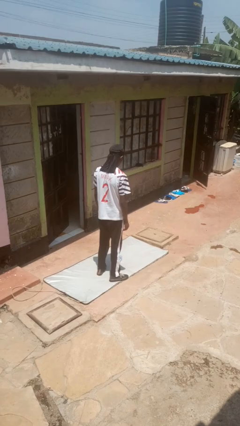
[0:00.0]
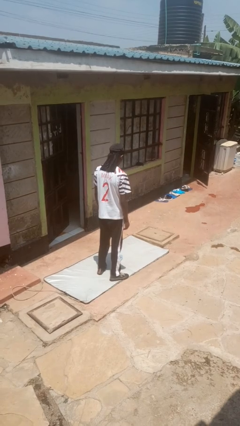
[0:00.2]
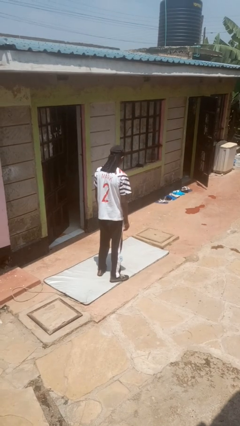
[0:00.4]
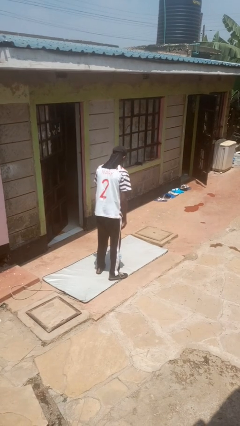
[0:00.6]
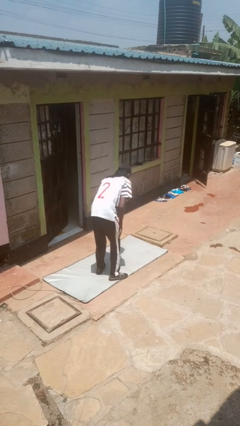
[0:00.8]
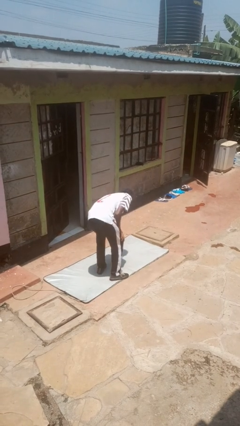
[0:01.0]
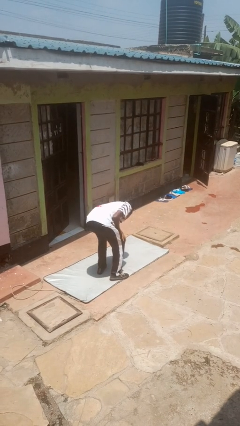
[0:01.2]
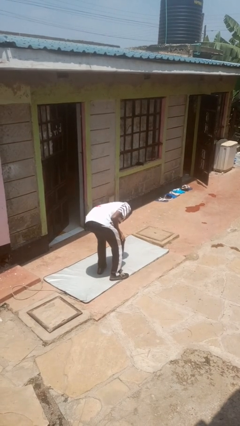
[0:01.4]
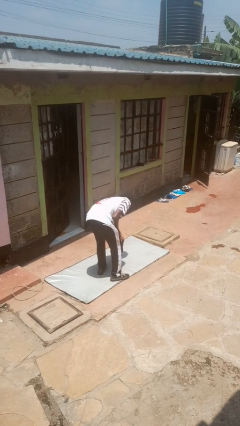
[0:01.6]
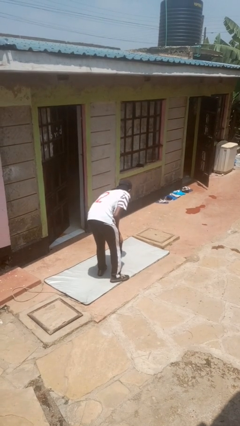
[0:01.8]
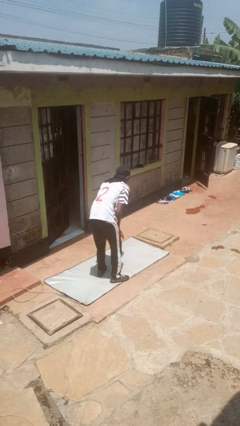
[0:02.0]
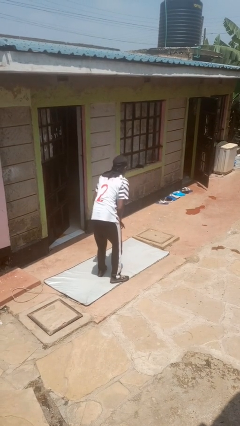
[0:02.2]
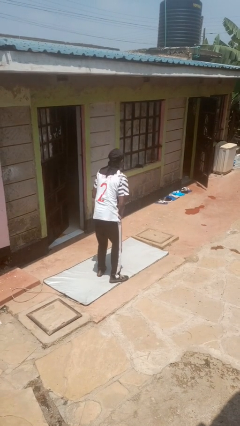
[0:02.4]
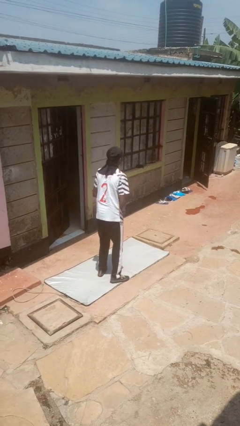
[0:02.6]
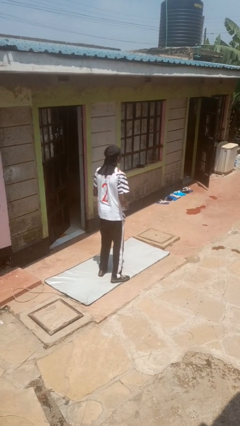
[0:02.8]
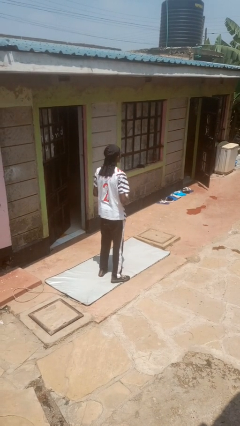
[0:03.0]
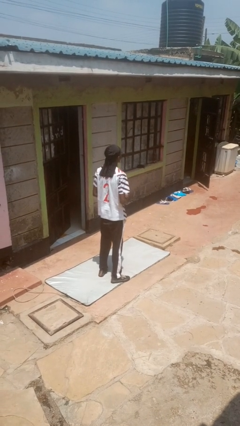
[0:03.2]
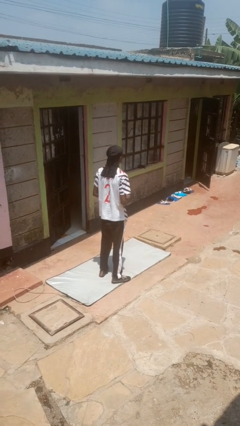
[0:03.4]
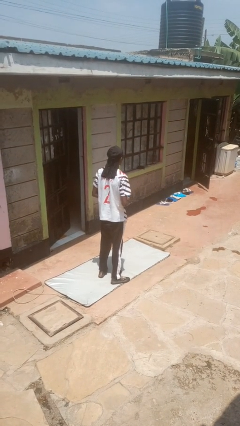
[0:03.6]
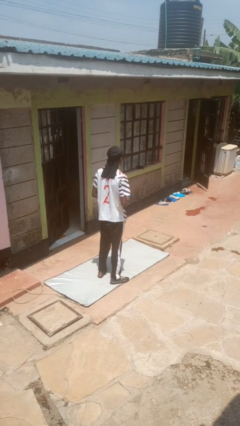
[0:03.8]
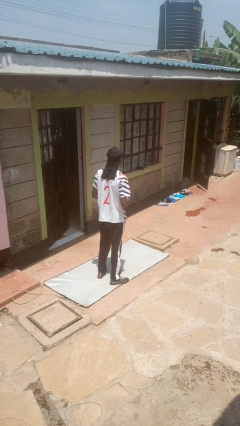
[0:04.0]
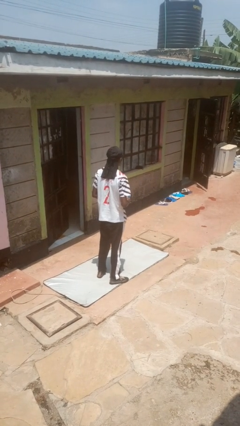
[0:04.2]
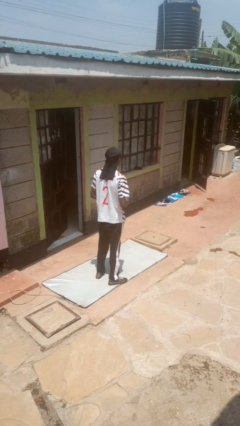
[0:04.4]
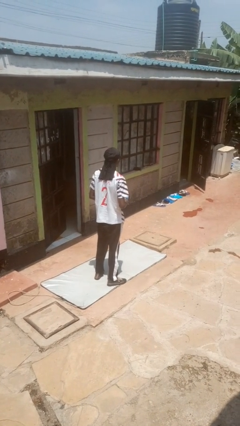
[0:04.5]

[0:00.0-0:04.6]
person picks up object from floor

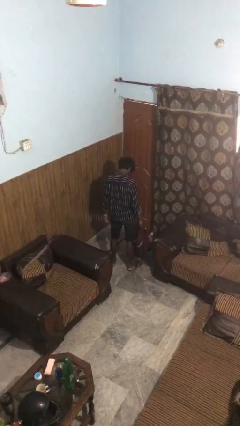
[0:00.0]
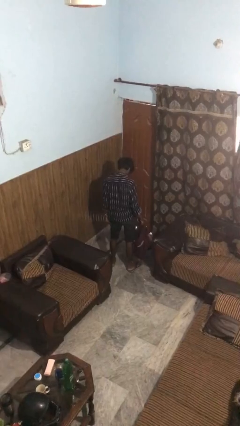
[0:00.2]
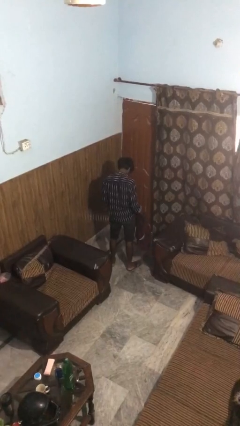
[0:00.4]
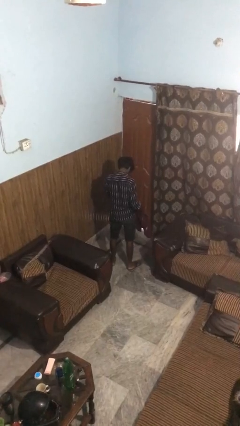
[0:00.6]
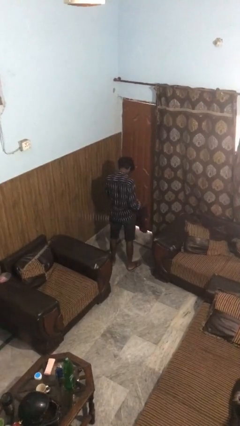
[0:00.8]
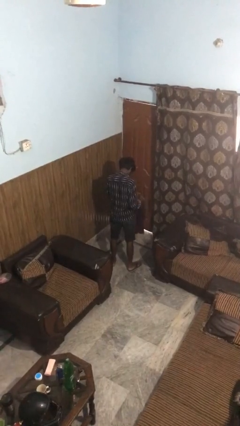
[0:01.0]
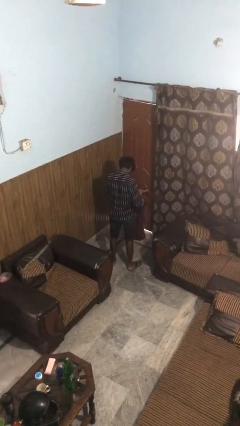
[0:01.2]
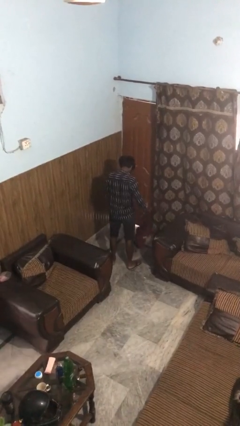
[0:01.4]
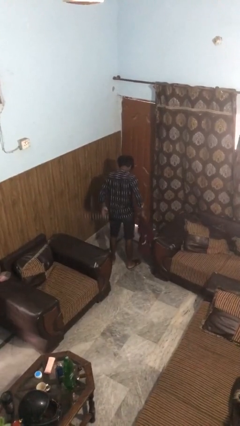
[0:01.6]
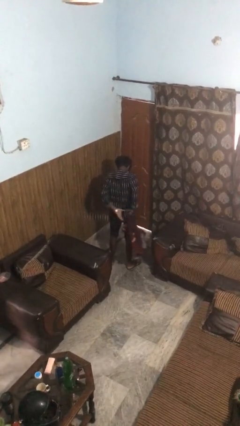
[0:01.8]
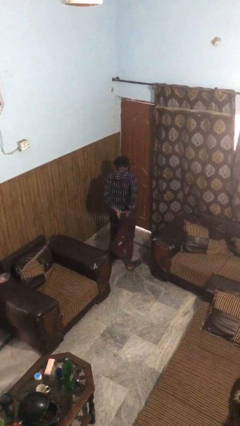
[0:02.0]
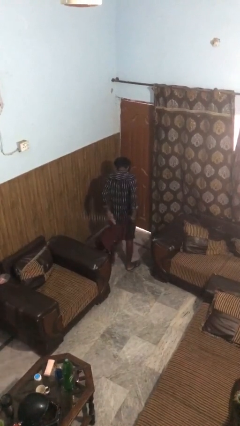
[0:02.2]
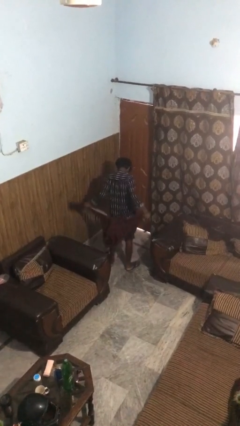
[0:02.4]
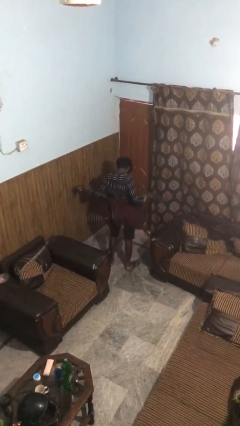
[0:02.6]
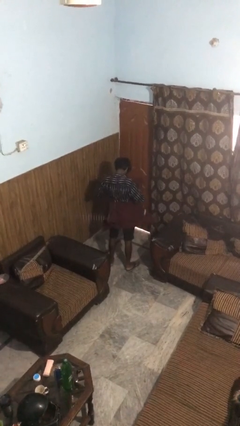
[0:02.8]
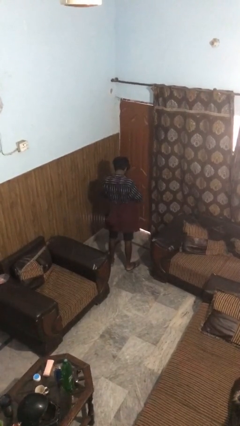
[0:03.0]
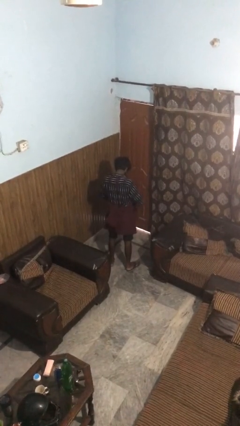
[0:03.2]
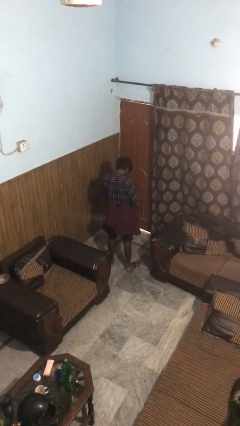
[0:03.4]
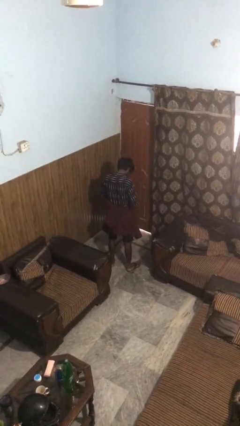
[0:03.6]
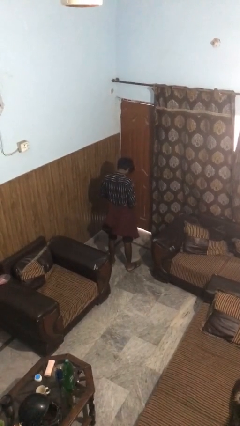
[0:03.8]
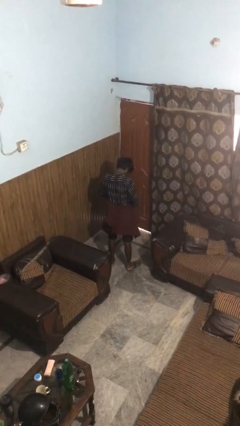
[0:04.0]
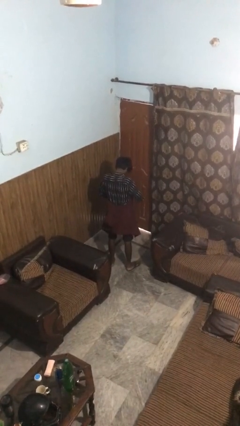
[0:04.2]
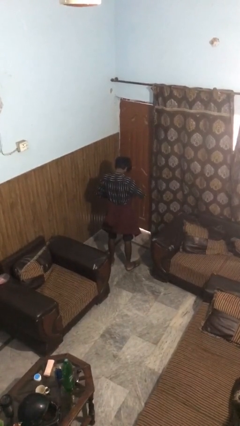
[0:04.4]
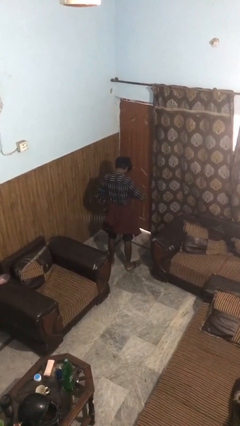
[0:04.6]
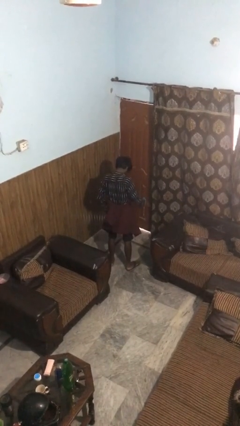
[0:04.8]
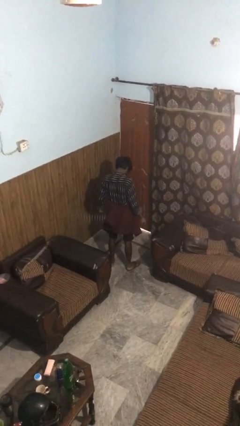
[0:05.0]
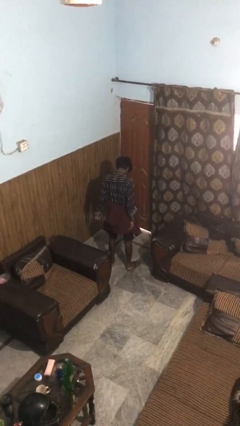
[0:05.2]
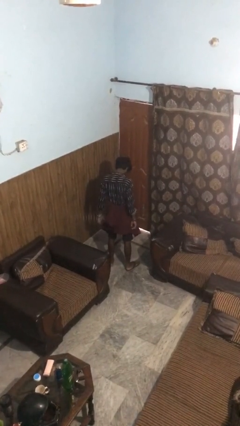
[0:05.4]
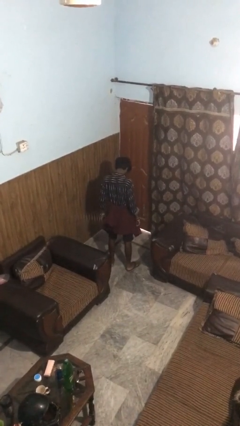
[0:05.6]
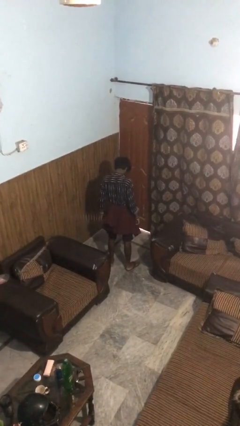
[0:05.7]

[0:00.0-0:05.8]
person ties jacket around waist

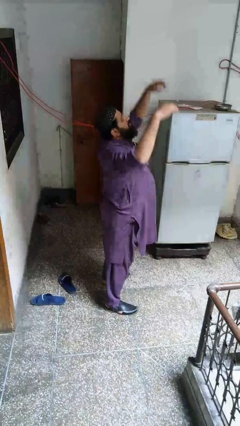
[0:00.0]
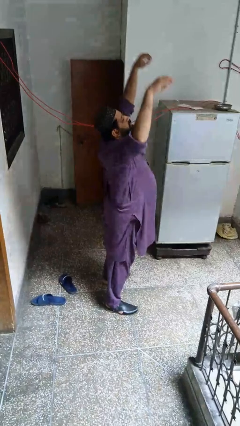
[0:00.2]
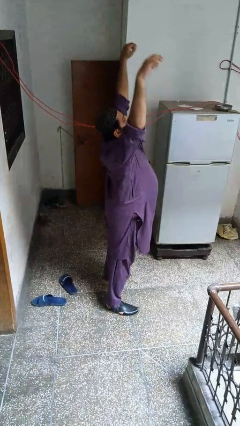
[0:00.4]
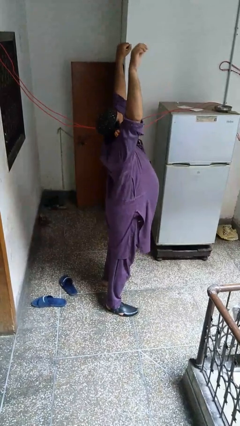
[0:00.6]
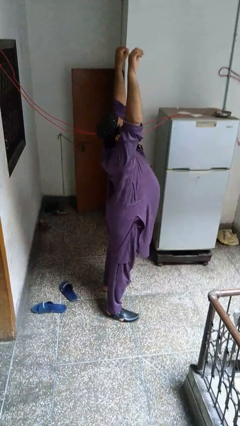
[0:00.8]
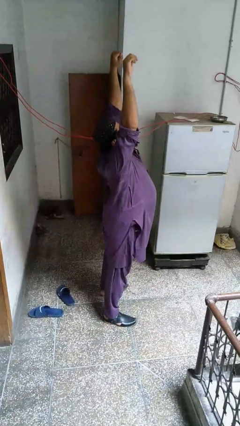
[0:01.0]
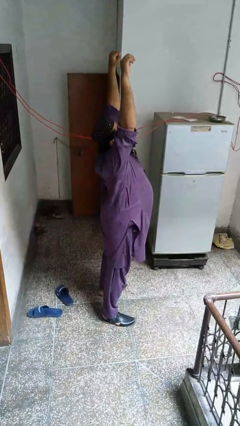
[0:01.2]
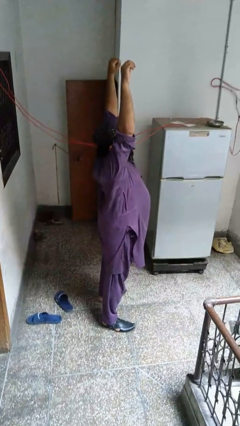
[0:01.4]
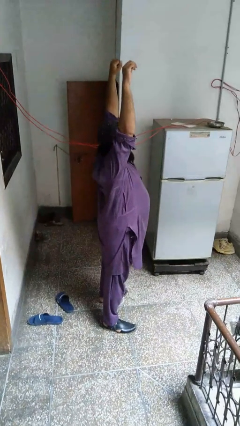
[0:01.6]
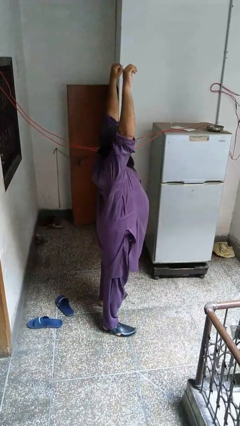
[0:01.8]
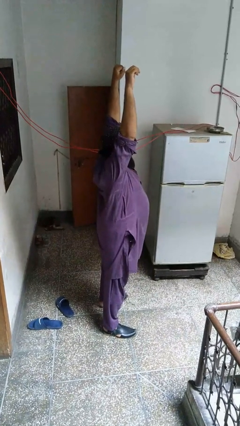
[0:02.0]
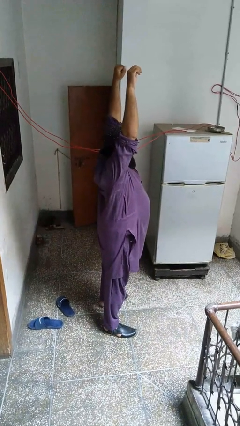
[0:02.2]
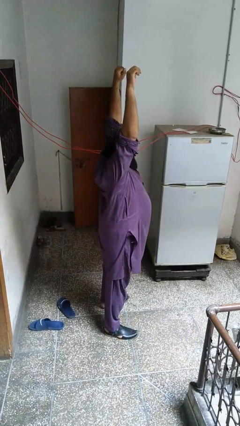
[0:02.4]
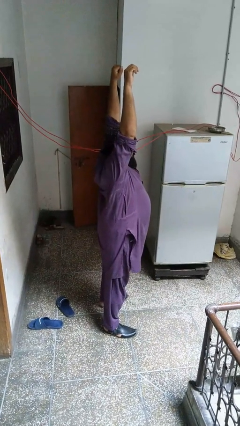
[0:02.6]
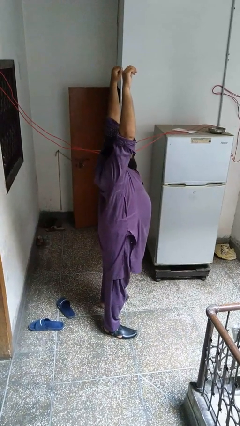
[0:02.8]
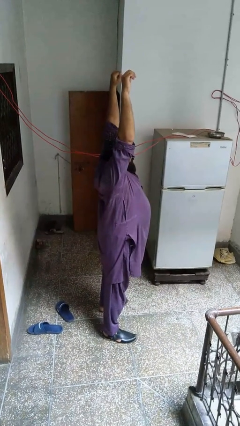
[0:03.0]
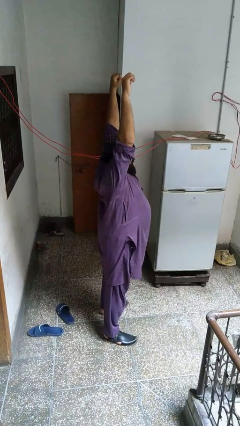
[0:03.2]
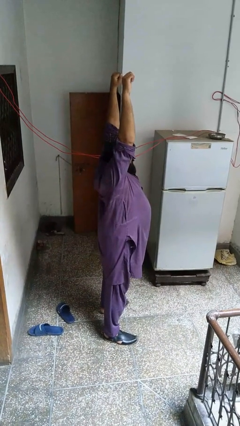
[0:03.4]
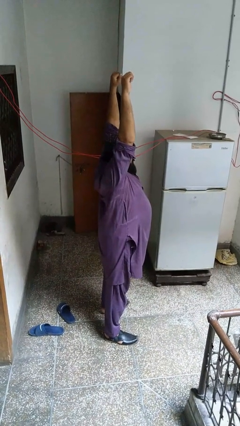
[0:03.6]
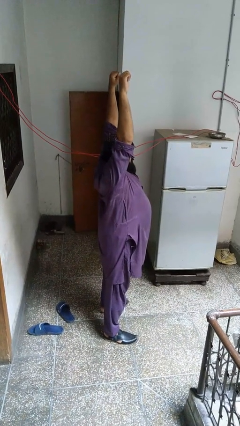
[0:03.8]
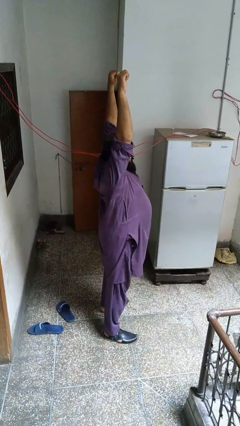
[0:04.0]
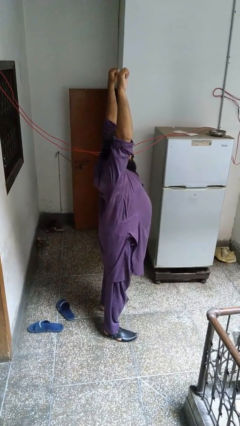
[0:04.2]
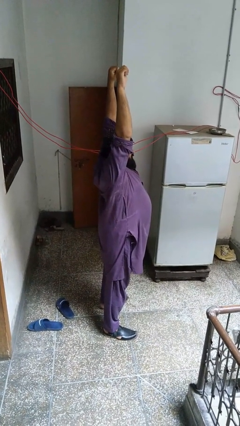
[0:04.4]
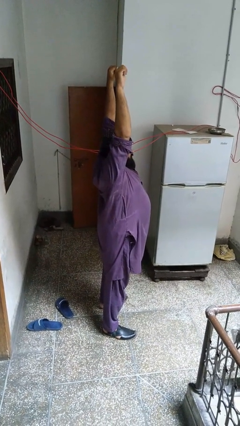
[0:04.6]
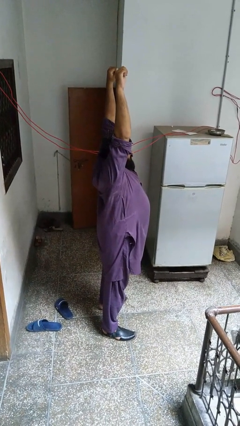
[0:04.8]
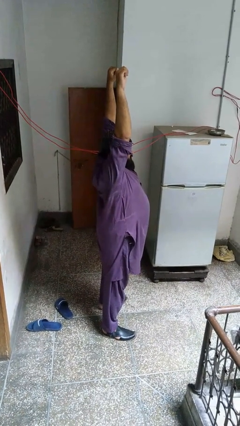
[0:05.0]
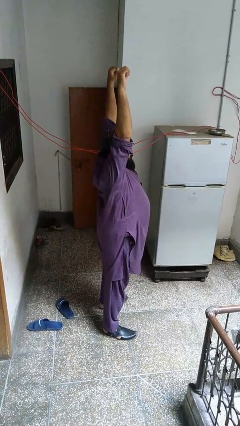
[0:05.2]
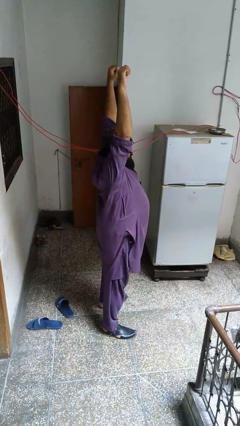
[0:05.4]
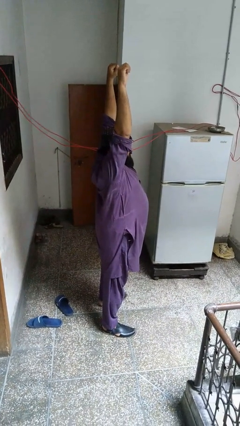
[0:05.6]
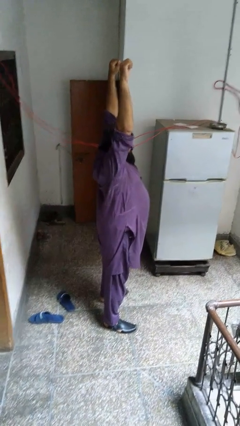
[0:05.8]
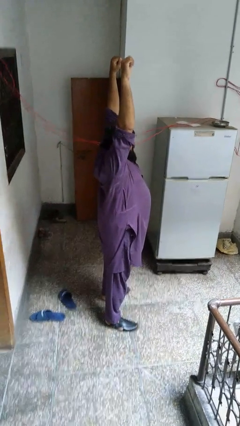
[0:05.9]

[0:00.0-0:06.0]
person stretches arms over head

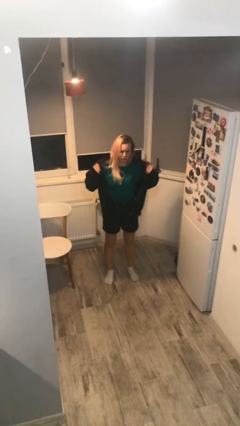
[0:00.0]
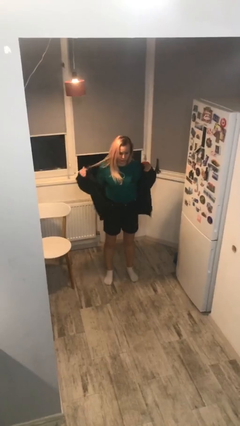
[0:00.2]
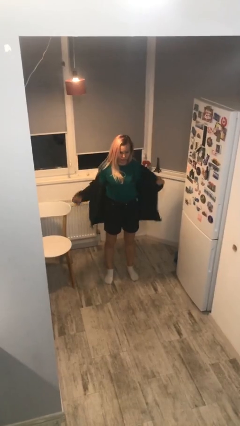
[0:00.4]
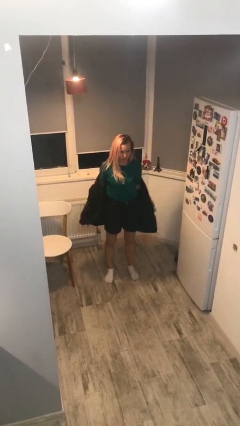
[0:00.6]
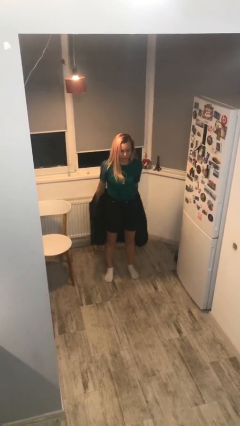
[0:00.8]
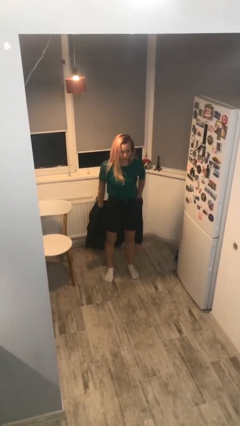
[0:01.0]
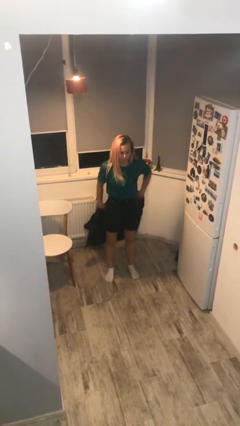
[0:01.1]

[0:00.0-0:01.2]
person takes off jacket
